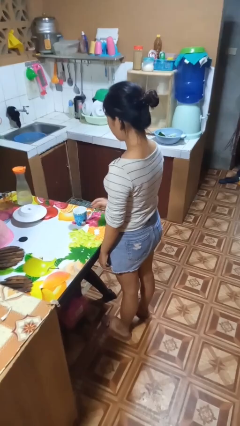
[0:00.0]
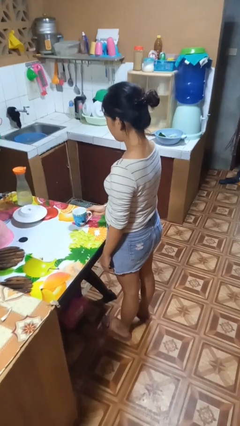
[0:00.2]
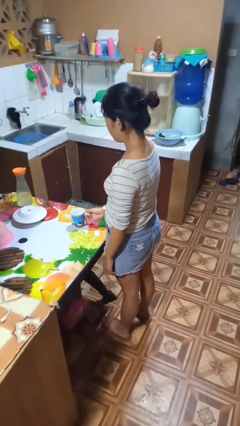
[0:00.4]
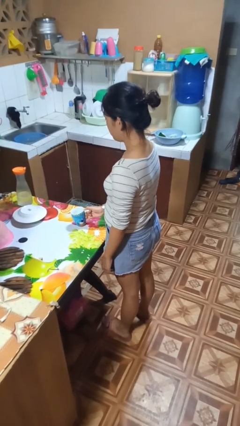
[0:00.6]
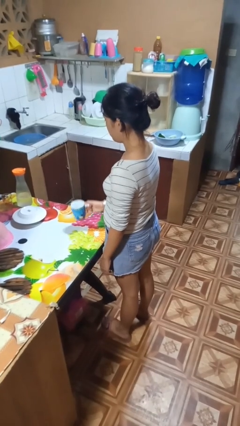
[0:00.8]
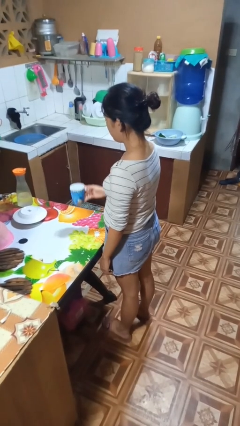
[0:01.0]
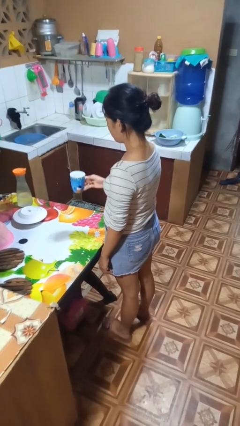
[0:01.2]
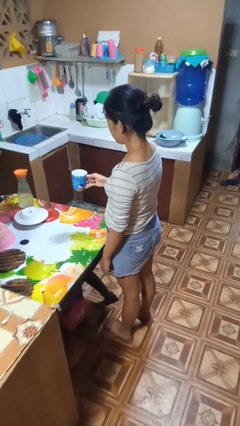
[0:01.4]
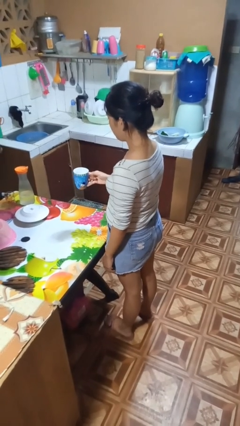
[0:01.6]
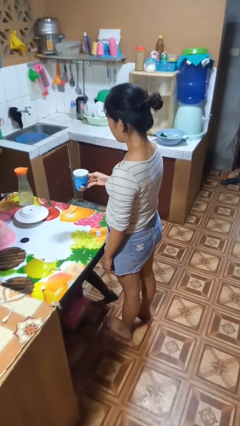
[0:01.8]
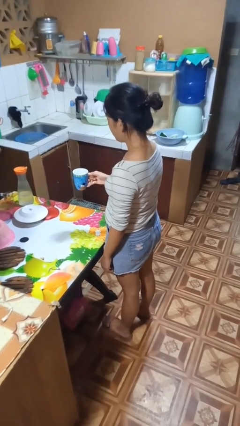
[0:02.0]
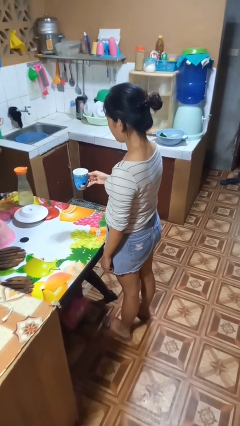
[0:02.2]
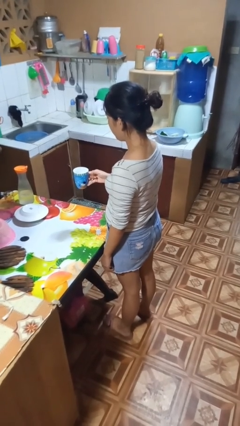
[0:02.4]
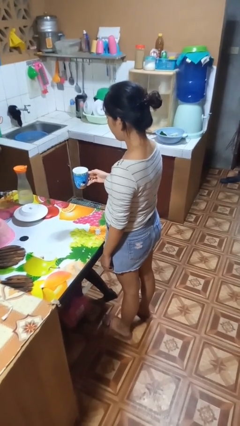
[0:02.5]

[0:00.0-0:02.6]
person picks up object from table

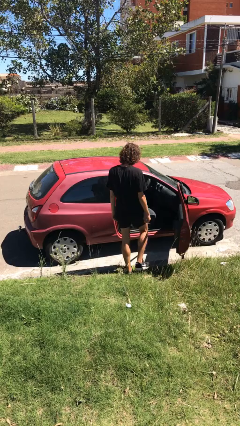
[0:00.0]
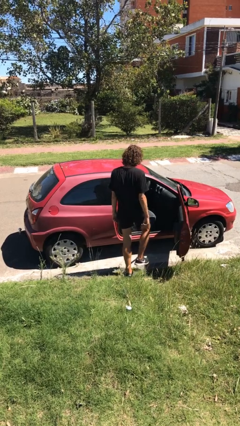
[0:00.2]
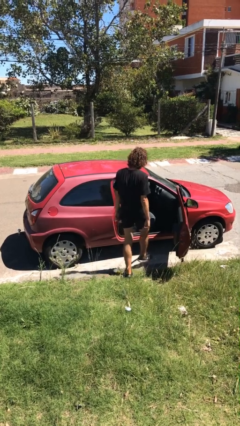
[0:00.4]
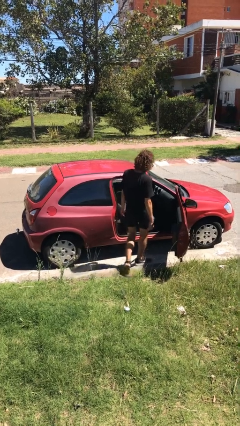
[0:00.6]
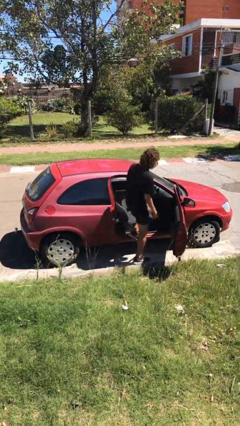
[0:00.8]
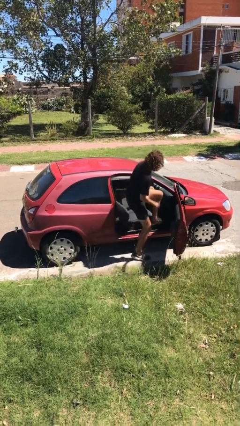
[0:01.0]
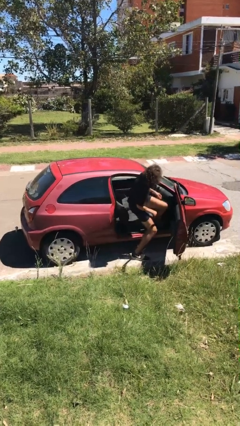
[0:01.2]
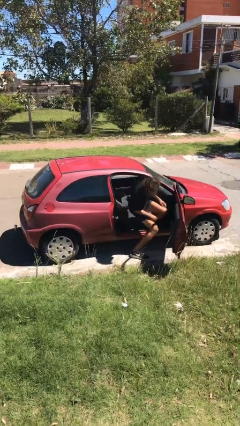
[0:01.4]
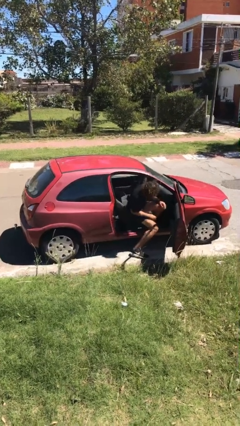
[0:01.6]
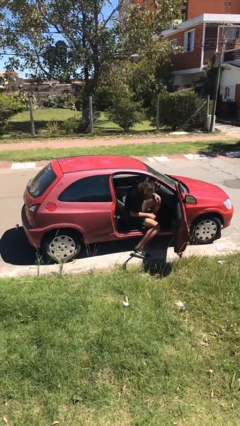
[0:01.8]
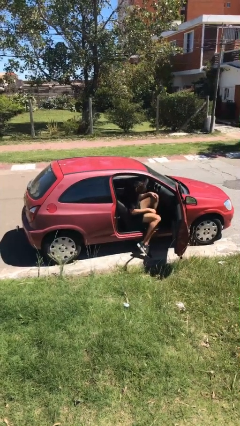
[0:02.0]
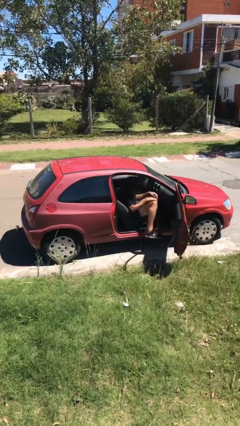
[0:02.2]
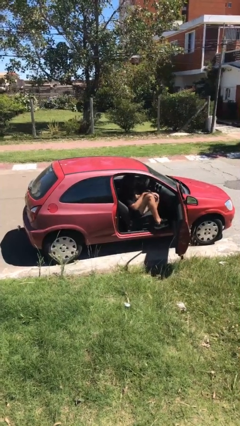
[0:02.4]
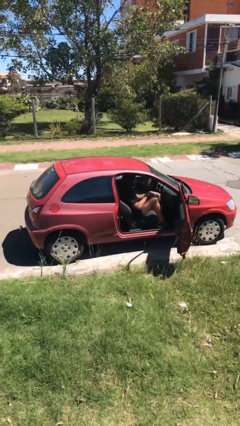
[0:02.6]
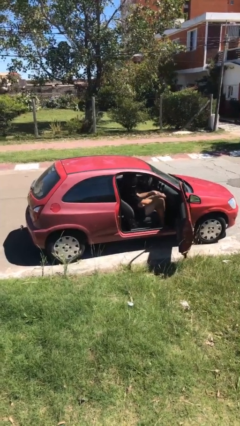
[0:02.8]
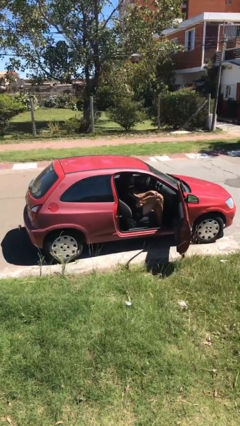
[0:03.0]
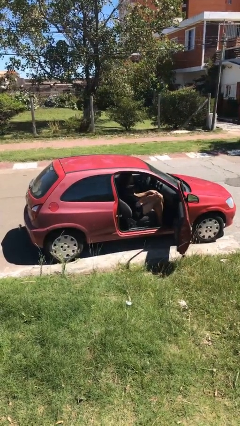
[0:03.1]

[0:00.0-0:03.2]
person enters car

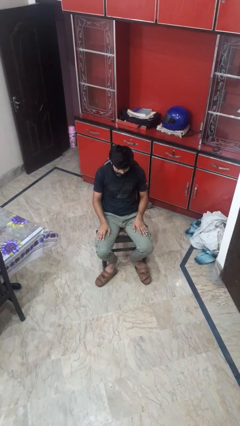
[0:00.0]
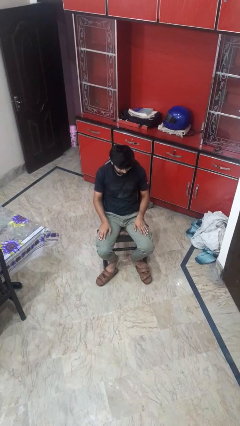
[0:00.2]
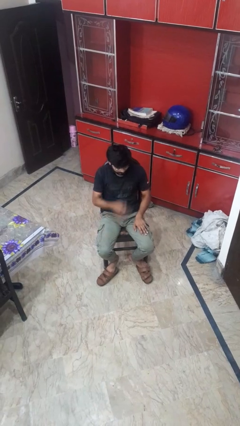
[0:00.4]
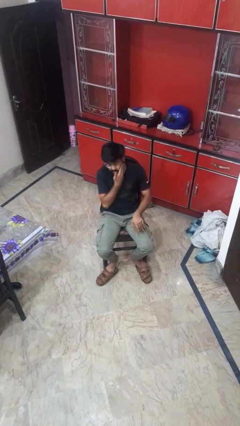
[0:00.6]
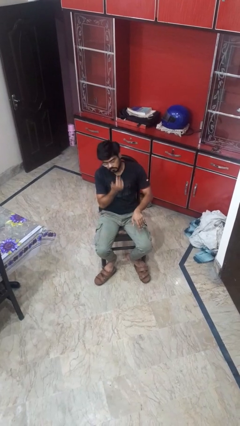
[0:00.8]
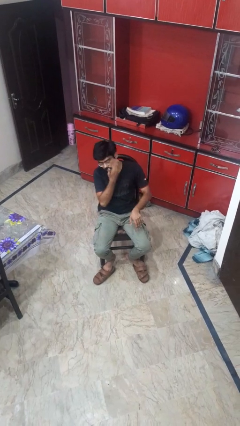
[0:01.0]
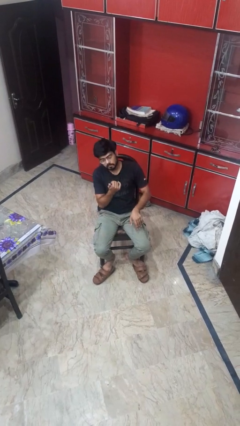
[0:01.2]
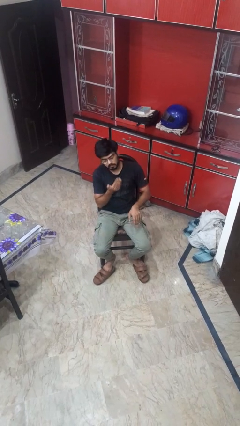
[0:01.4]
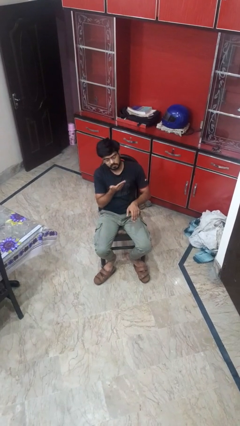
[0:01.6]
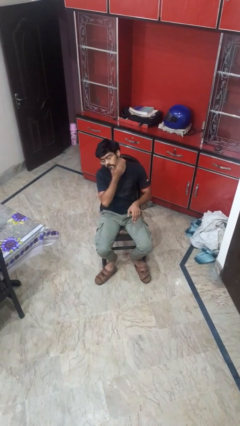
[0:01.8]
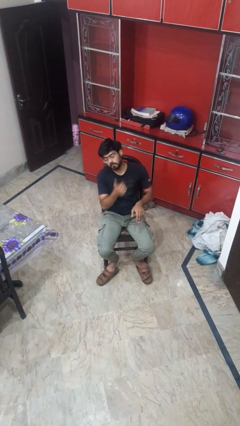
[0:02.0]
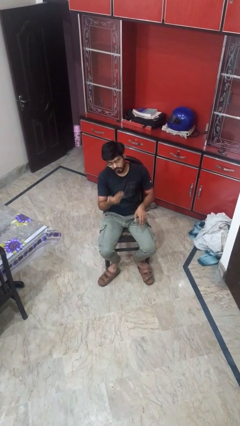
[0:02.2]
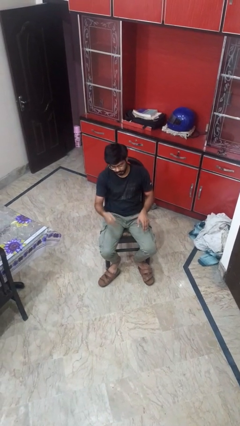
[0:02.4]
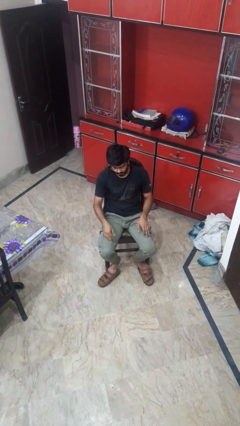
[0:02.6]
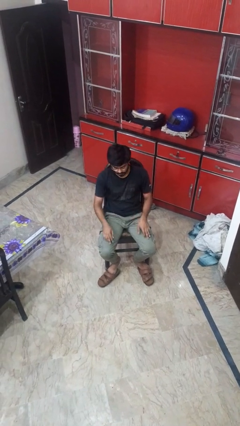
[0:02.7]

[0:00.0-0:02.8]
person swats bug

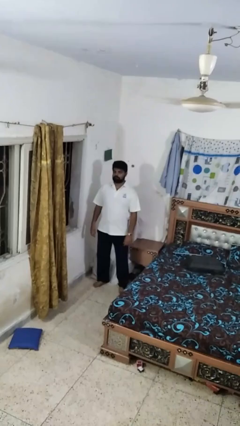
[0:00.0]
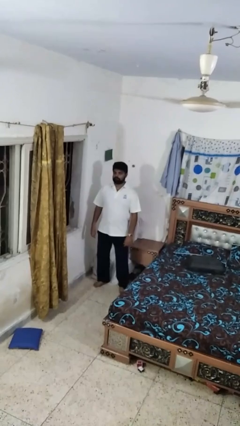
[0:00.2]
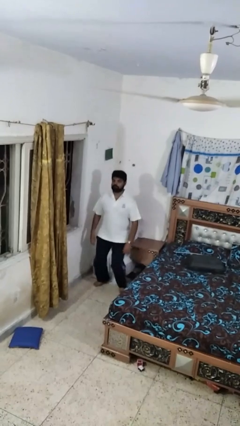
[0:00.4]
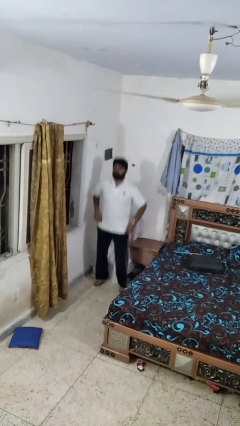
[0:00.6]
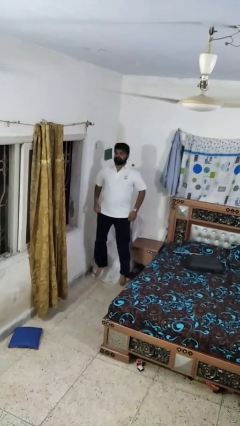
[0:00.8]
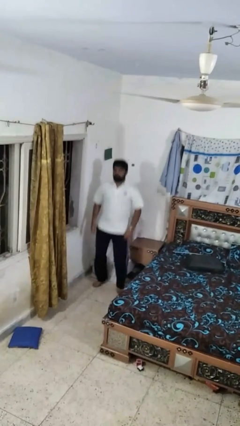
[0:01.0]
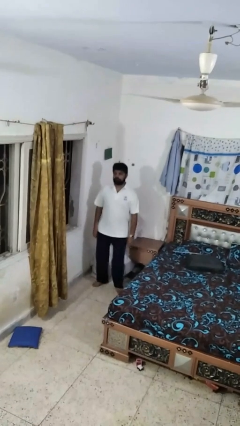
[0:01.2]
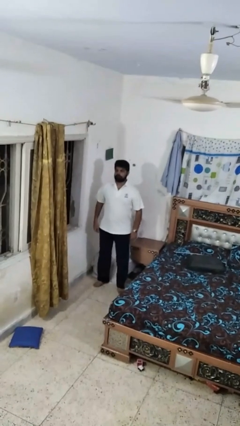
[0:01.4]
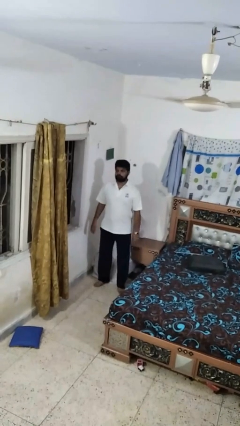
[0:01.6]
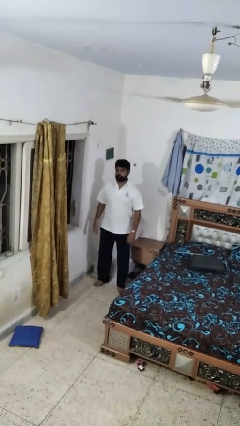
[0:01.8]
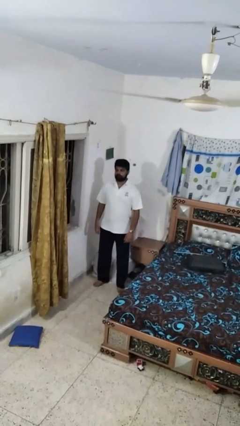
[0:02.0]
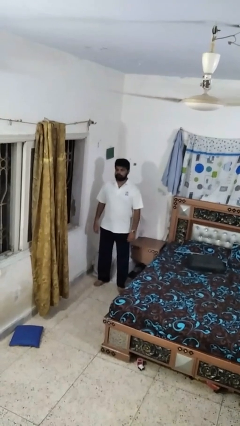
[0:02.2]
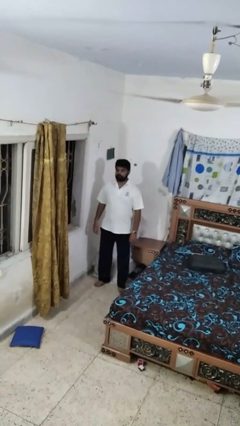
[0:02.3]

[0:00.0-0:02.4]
person jumps

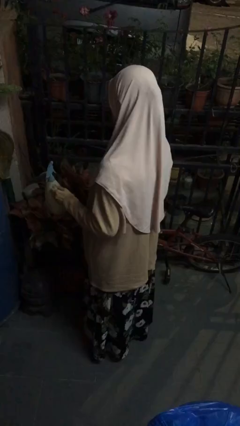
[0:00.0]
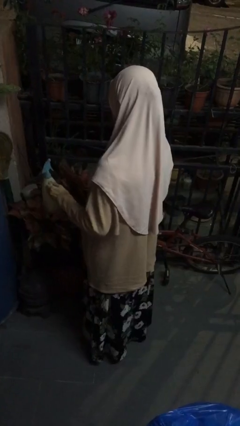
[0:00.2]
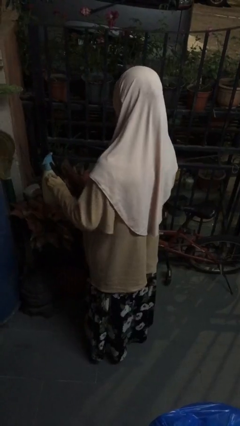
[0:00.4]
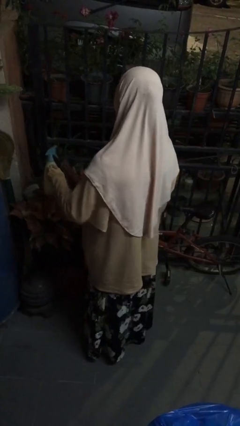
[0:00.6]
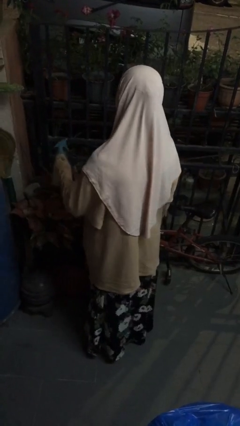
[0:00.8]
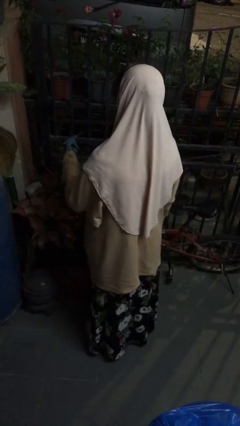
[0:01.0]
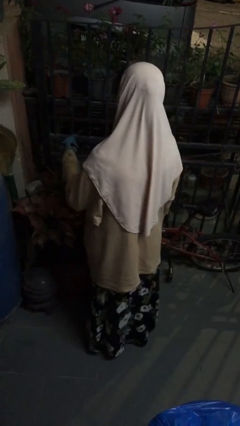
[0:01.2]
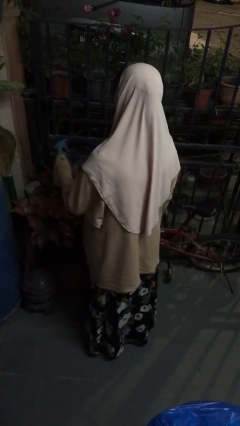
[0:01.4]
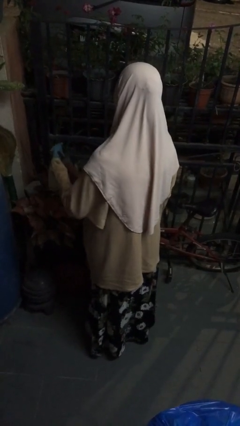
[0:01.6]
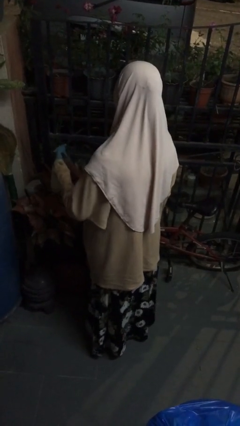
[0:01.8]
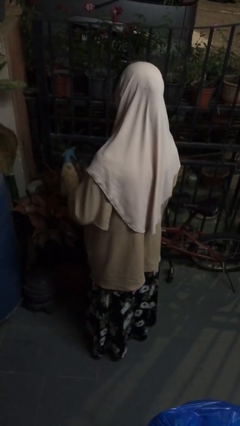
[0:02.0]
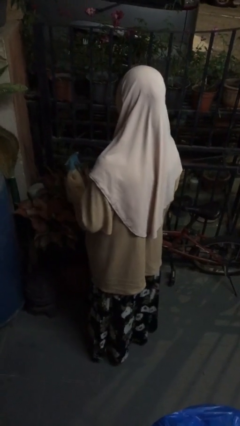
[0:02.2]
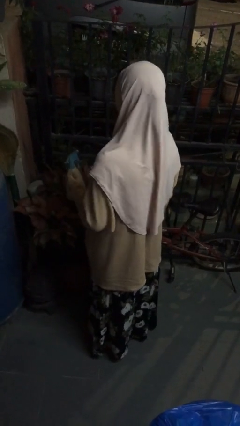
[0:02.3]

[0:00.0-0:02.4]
person waters houseplant

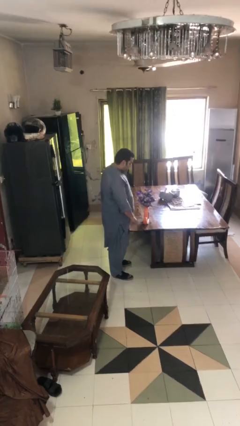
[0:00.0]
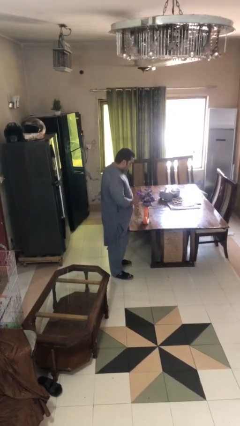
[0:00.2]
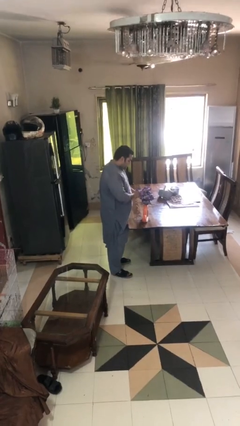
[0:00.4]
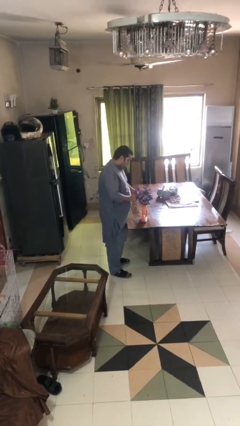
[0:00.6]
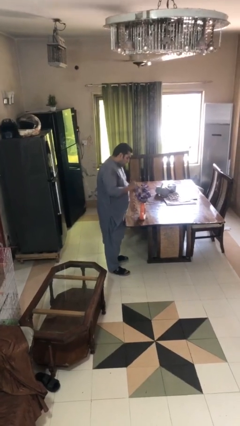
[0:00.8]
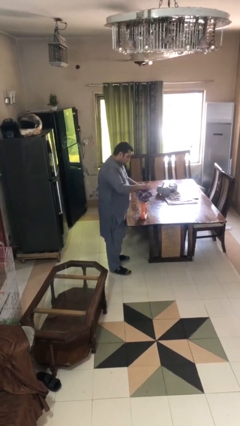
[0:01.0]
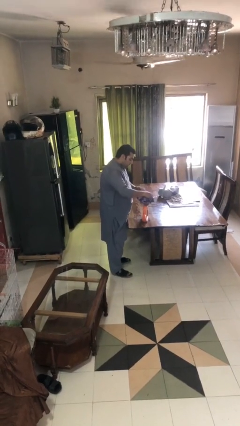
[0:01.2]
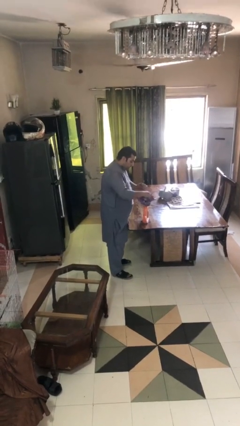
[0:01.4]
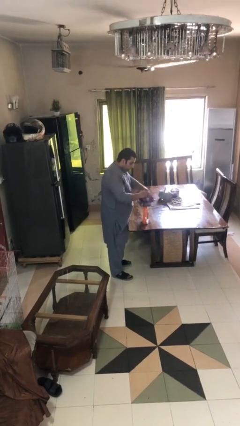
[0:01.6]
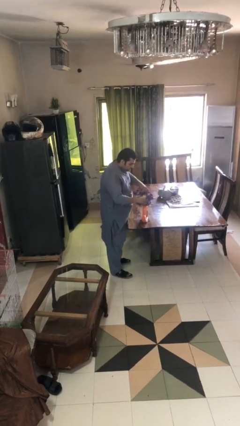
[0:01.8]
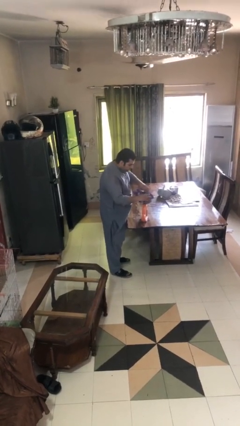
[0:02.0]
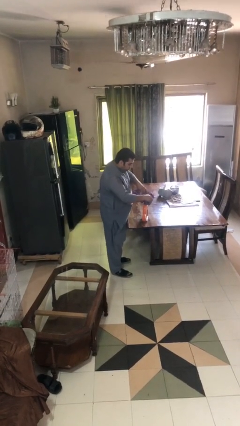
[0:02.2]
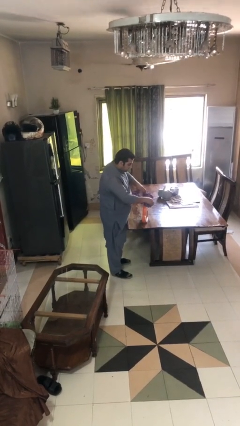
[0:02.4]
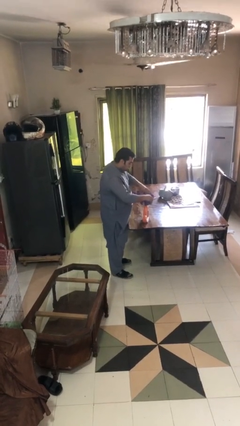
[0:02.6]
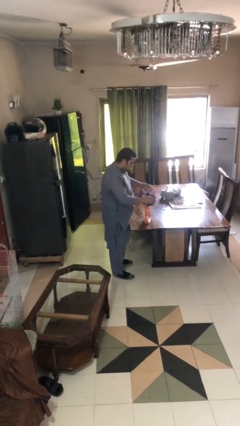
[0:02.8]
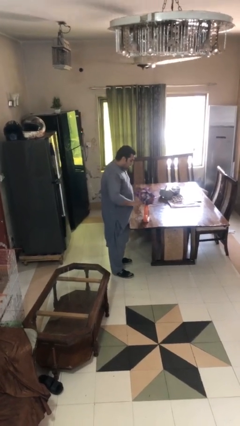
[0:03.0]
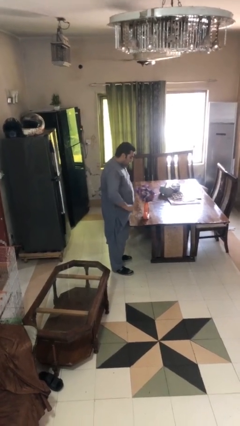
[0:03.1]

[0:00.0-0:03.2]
person arranges flowers in vase

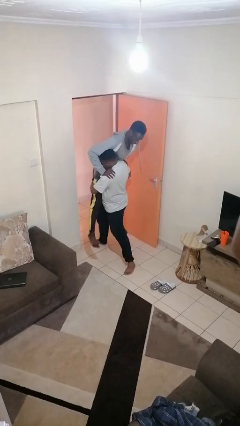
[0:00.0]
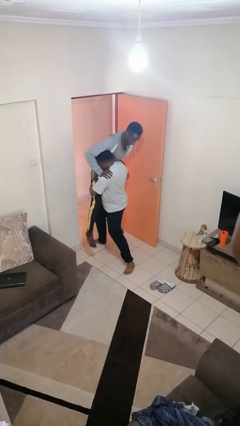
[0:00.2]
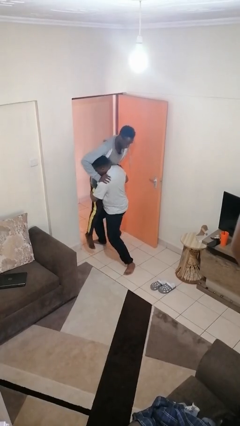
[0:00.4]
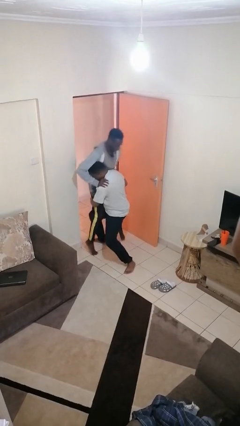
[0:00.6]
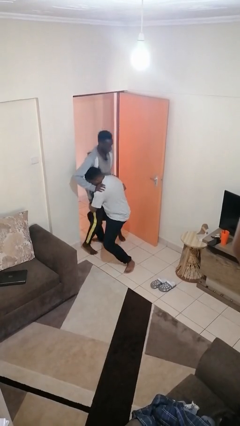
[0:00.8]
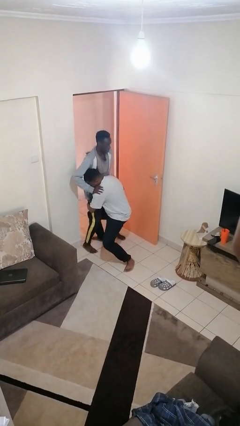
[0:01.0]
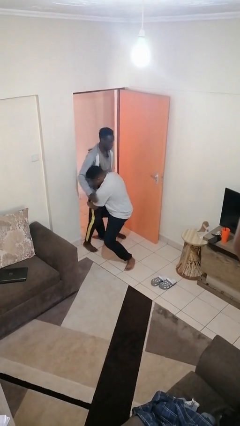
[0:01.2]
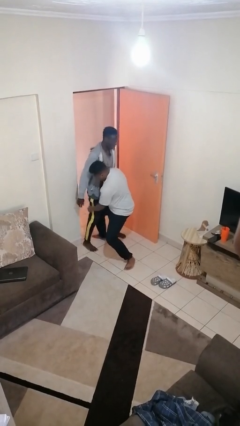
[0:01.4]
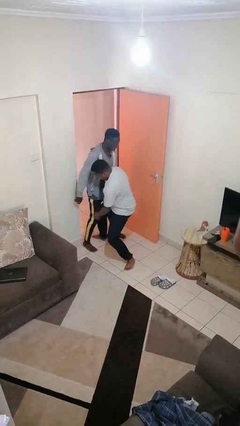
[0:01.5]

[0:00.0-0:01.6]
person puts down person
